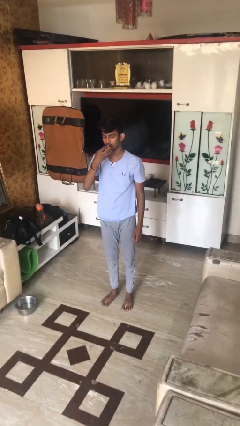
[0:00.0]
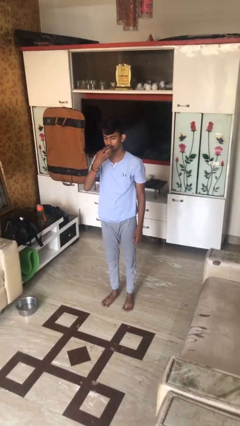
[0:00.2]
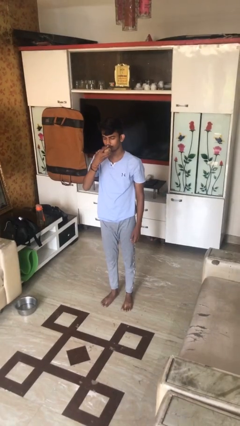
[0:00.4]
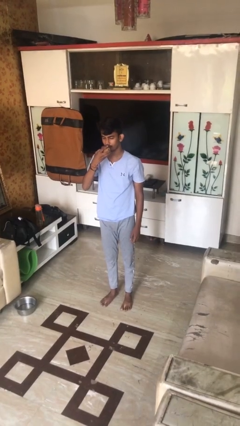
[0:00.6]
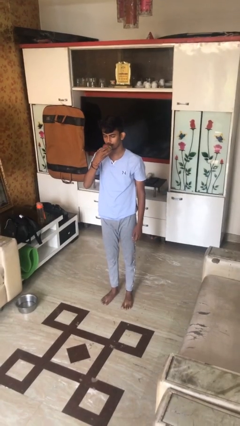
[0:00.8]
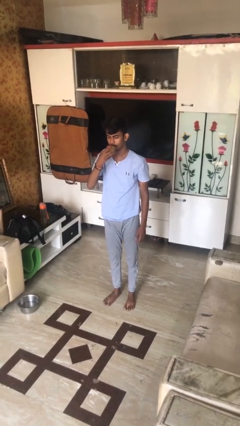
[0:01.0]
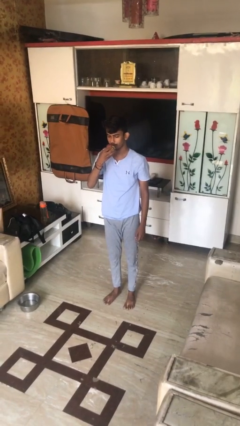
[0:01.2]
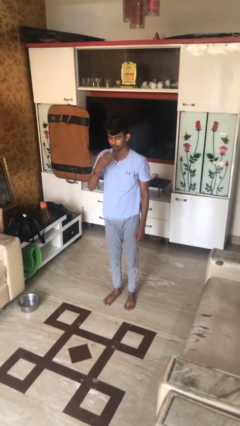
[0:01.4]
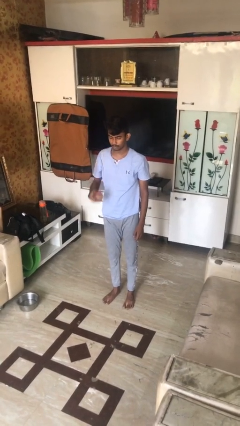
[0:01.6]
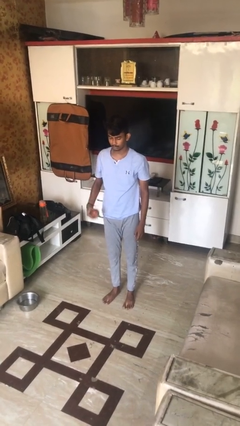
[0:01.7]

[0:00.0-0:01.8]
person eats apple

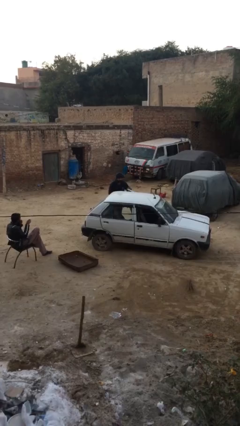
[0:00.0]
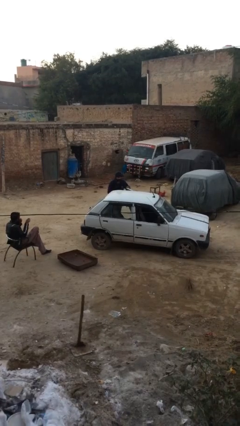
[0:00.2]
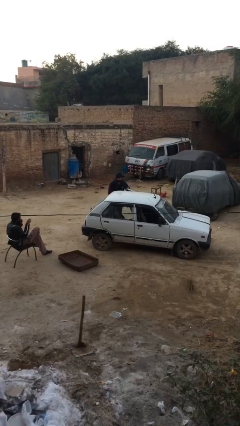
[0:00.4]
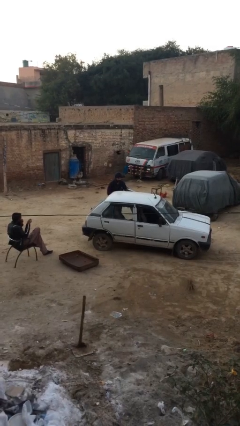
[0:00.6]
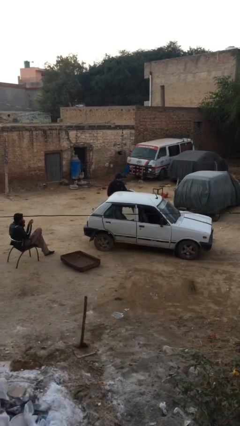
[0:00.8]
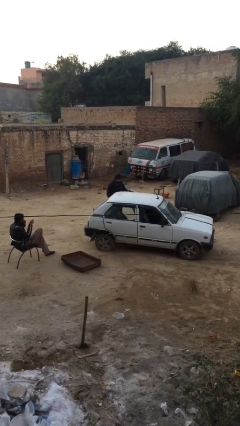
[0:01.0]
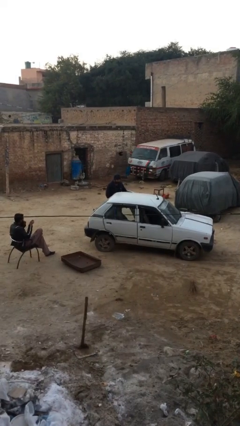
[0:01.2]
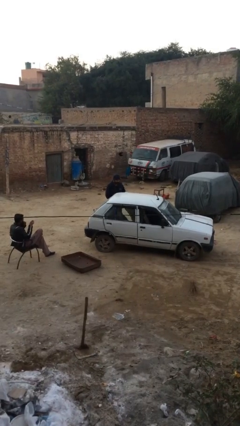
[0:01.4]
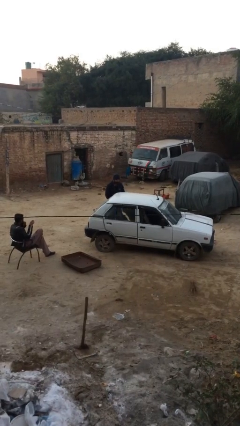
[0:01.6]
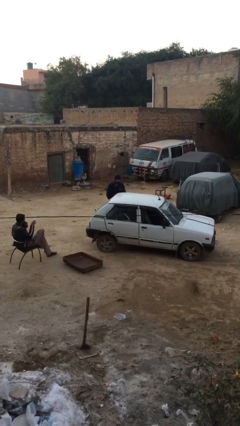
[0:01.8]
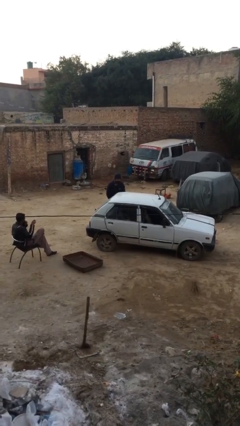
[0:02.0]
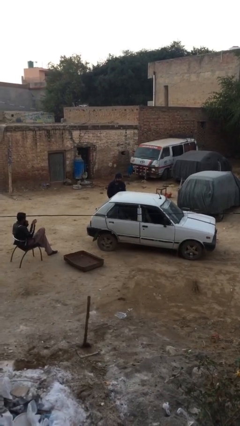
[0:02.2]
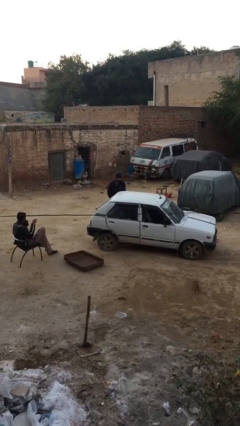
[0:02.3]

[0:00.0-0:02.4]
person closes car door

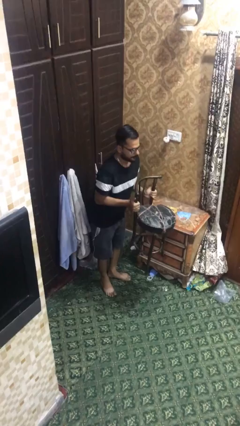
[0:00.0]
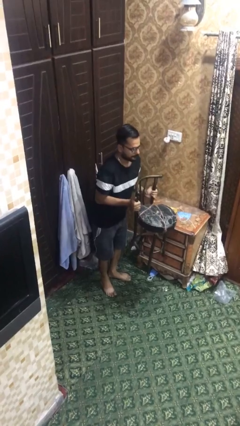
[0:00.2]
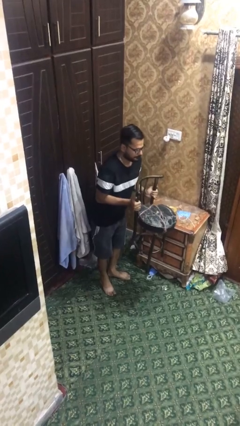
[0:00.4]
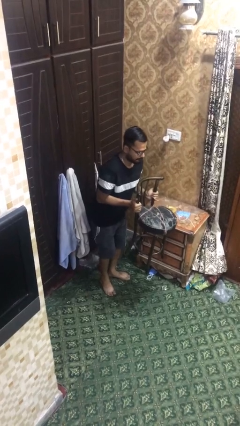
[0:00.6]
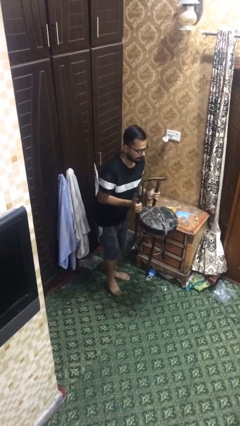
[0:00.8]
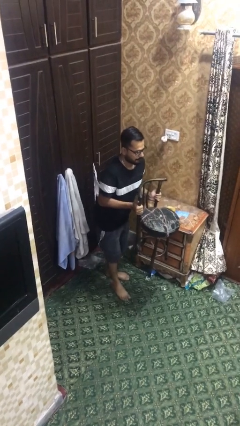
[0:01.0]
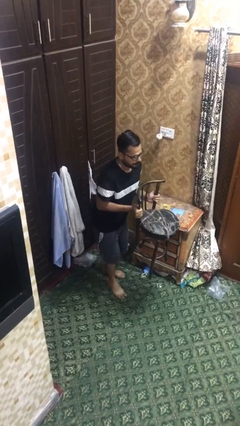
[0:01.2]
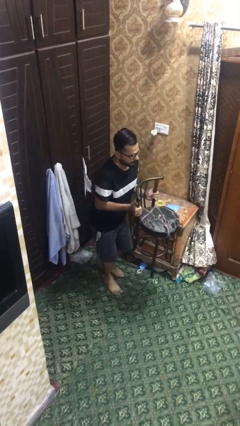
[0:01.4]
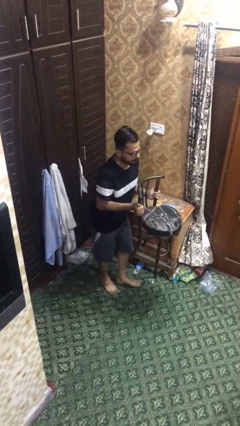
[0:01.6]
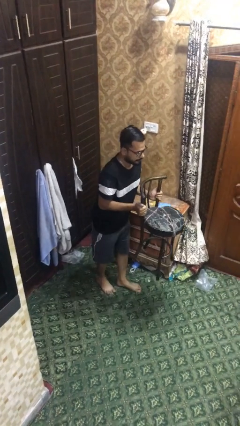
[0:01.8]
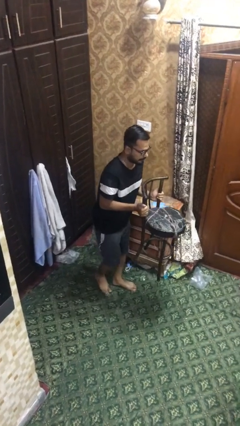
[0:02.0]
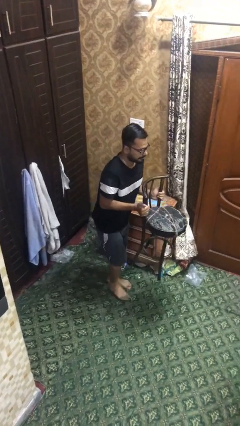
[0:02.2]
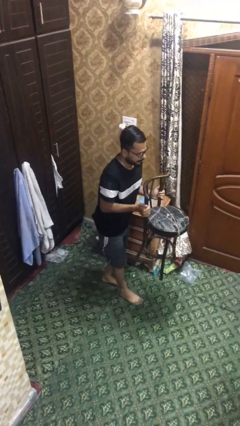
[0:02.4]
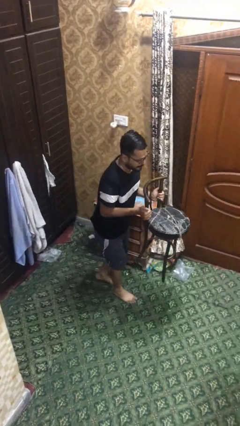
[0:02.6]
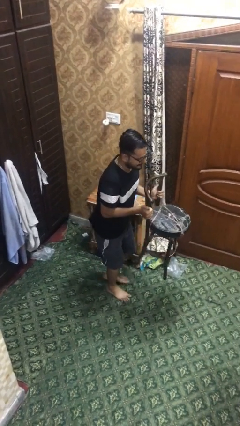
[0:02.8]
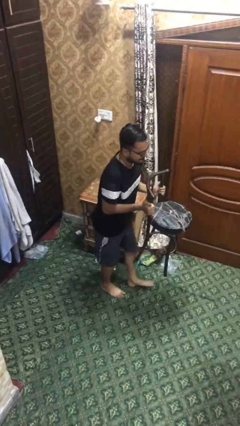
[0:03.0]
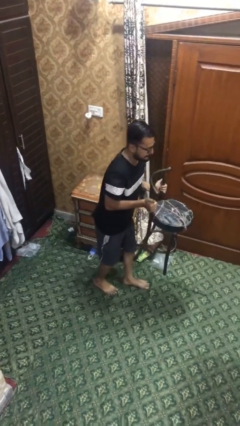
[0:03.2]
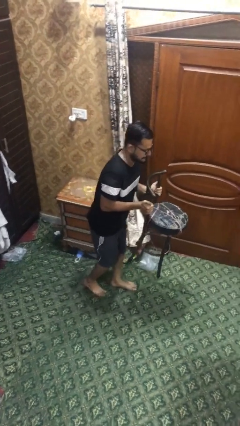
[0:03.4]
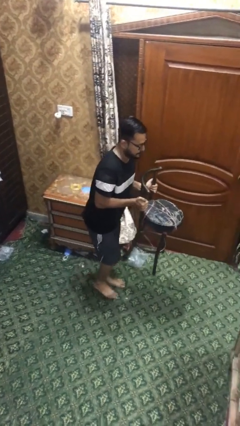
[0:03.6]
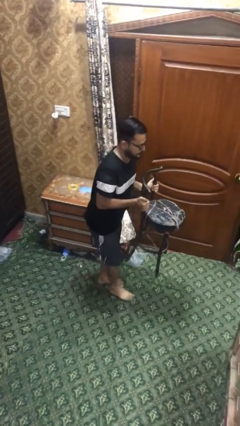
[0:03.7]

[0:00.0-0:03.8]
person carries heavy object

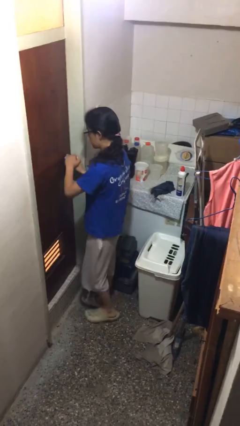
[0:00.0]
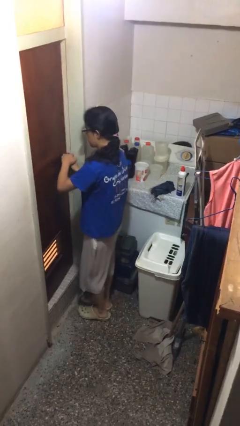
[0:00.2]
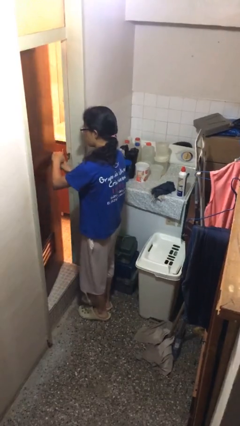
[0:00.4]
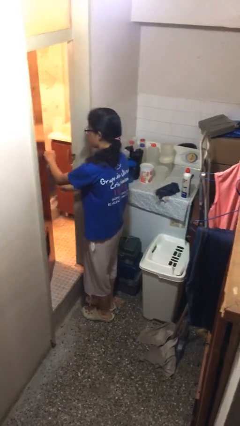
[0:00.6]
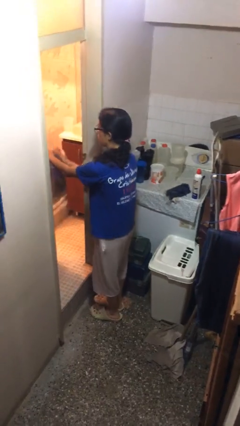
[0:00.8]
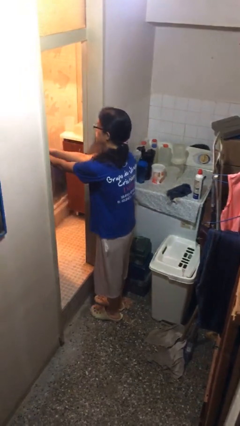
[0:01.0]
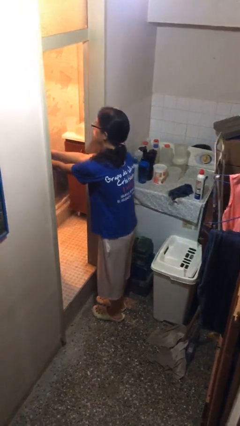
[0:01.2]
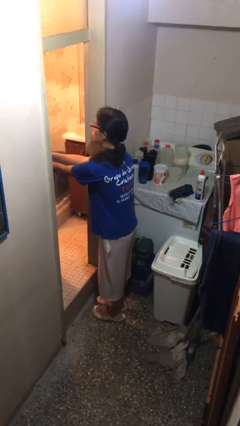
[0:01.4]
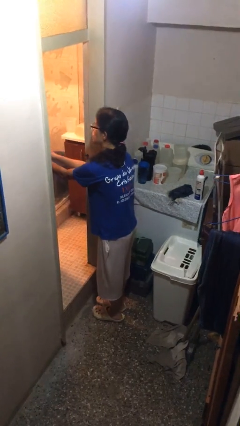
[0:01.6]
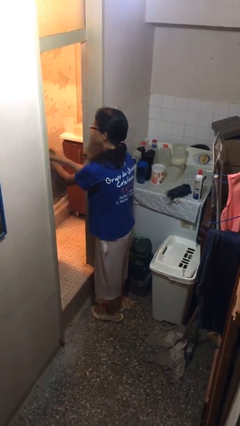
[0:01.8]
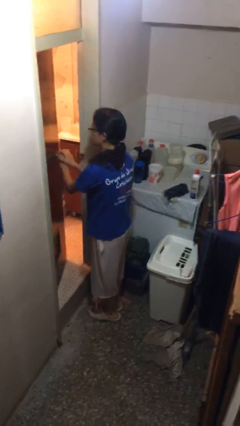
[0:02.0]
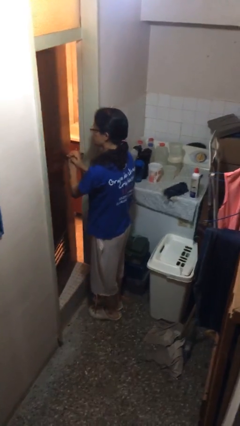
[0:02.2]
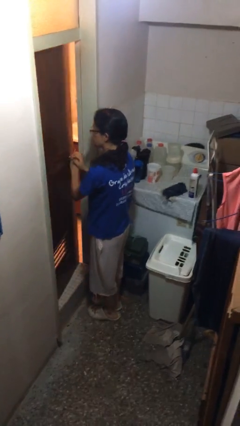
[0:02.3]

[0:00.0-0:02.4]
person opens facility door

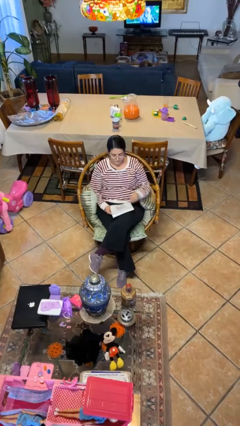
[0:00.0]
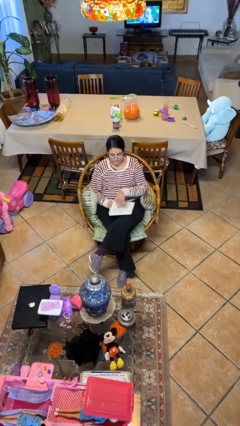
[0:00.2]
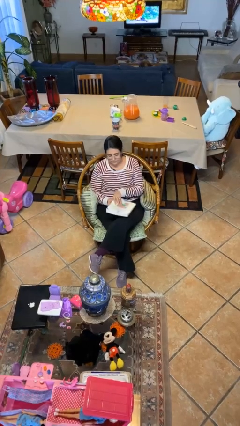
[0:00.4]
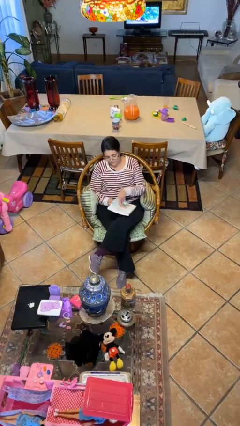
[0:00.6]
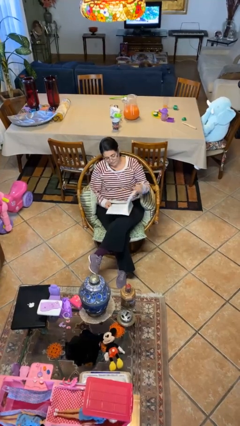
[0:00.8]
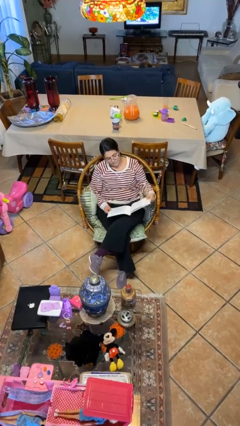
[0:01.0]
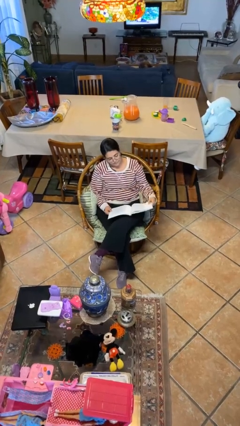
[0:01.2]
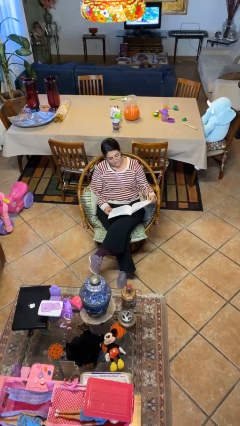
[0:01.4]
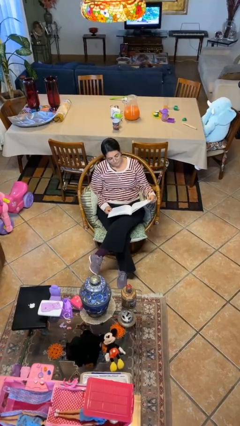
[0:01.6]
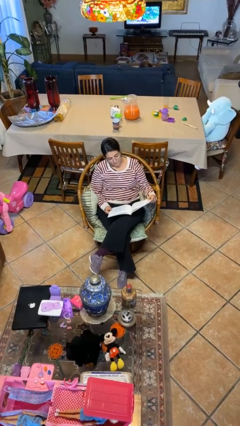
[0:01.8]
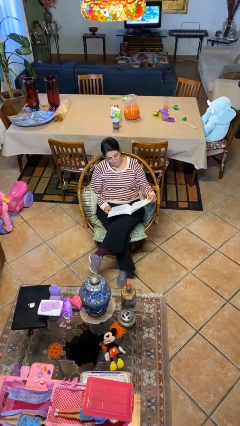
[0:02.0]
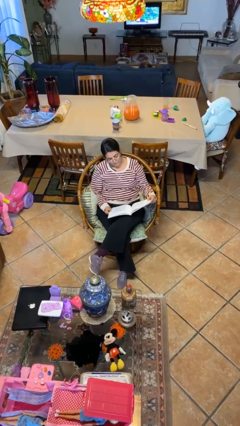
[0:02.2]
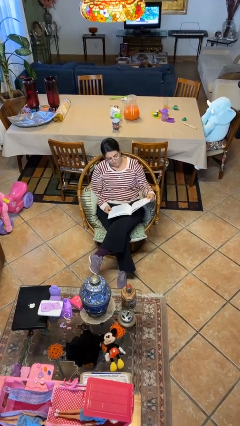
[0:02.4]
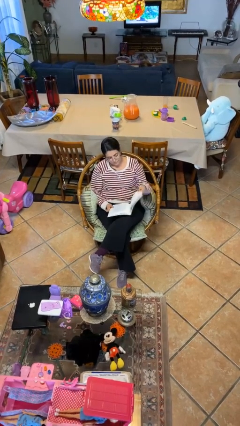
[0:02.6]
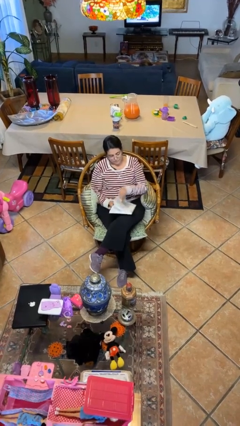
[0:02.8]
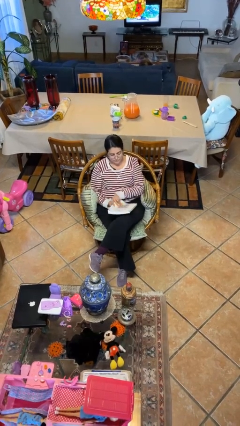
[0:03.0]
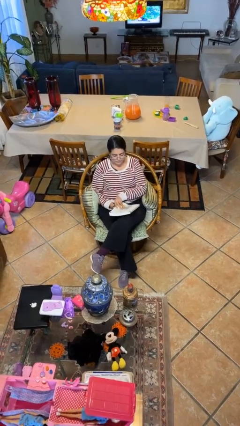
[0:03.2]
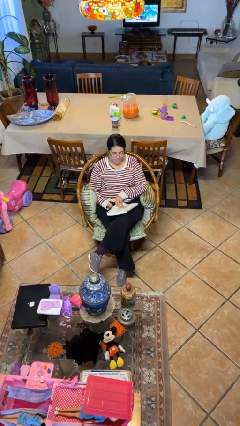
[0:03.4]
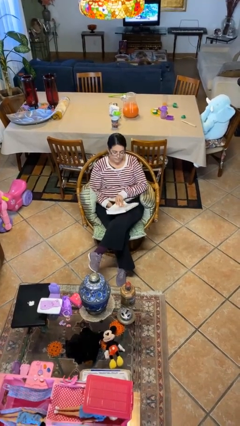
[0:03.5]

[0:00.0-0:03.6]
person reads document

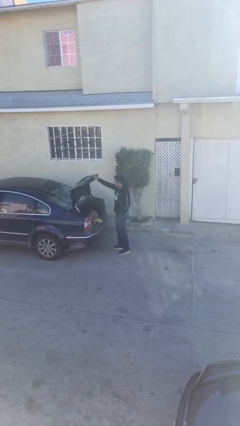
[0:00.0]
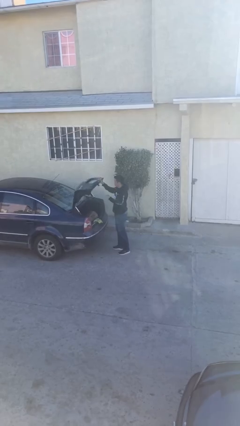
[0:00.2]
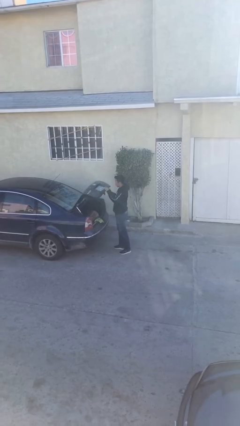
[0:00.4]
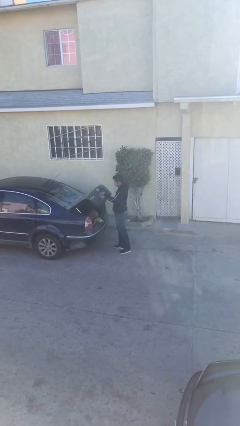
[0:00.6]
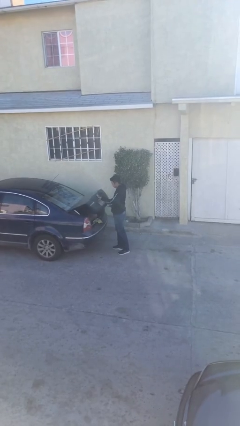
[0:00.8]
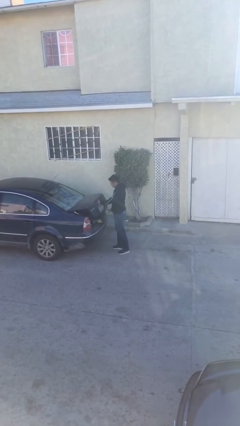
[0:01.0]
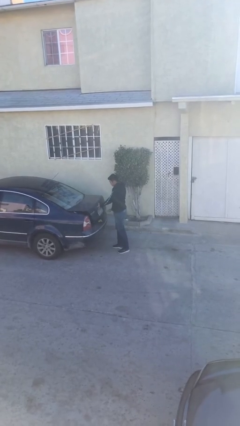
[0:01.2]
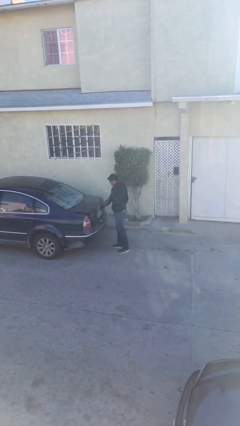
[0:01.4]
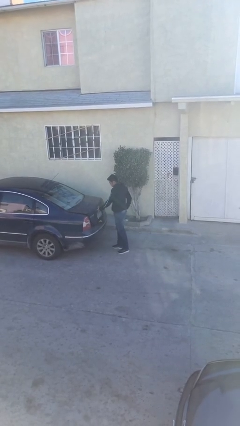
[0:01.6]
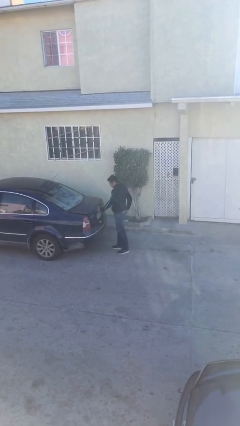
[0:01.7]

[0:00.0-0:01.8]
person closes car trunk

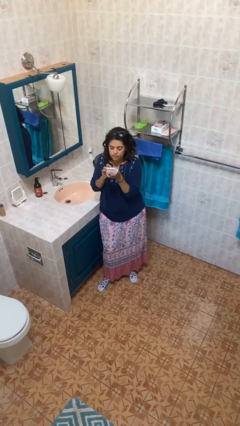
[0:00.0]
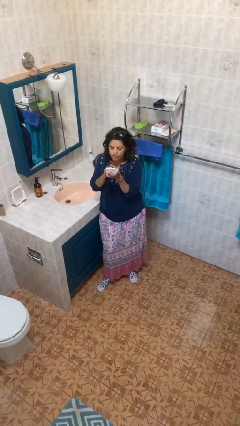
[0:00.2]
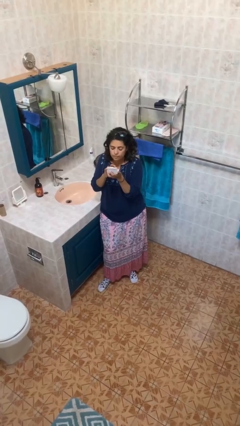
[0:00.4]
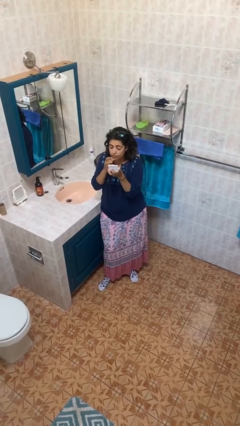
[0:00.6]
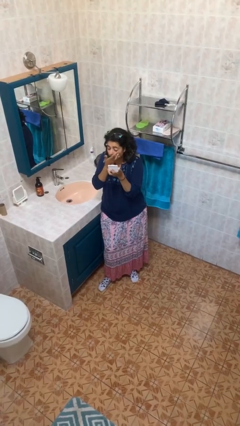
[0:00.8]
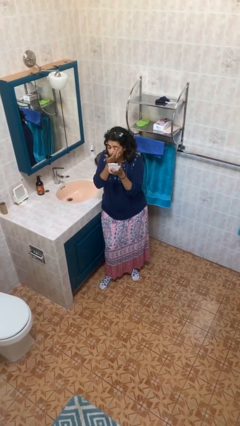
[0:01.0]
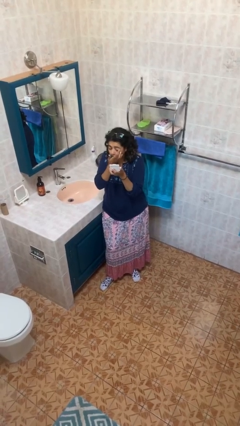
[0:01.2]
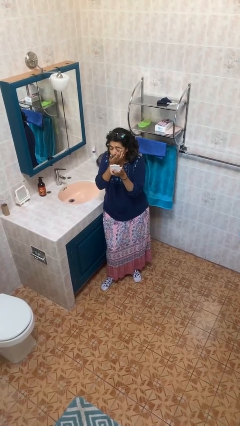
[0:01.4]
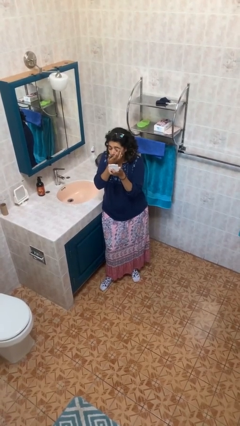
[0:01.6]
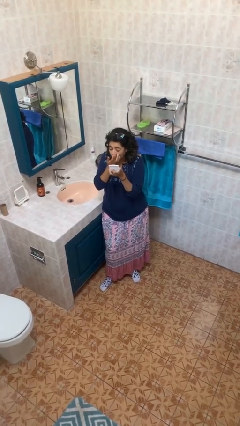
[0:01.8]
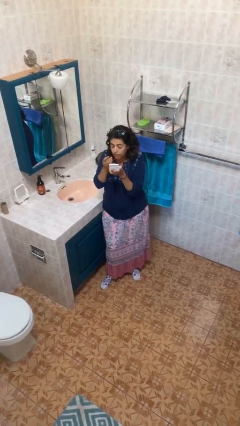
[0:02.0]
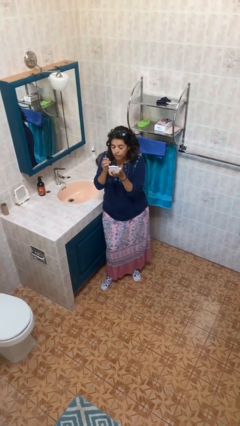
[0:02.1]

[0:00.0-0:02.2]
person applies eye makeup
